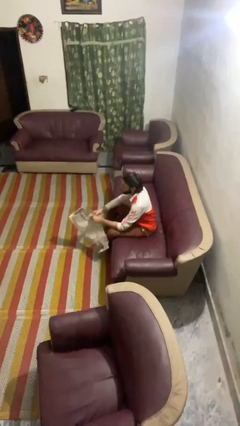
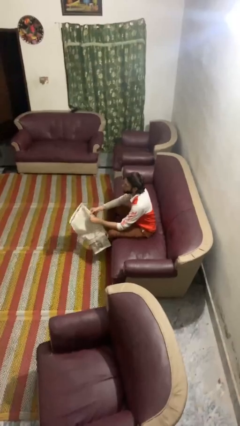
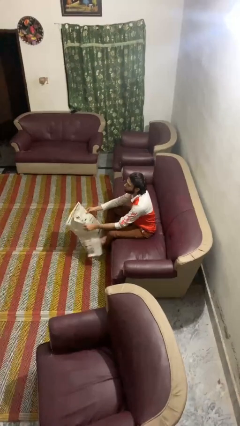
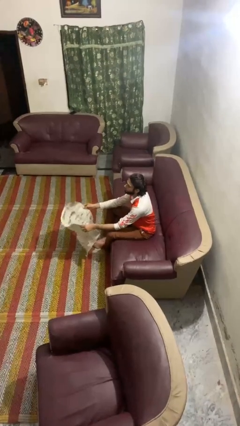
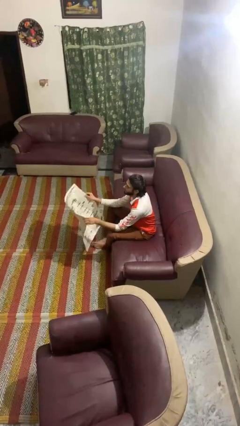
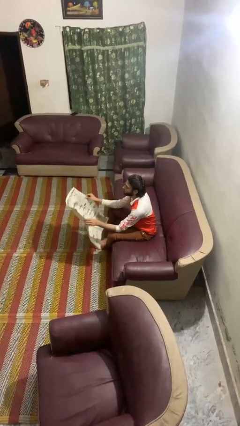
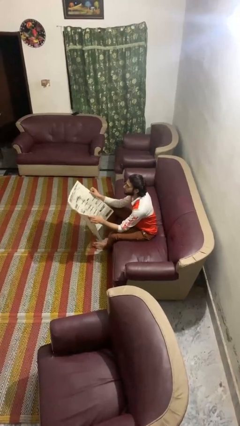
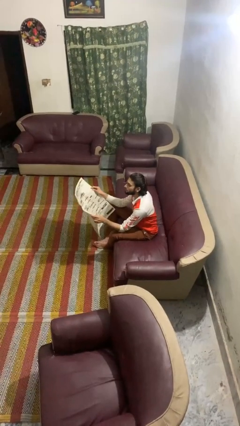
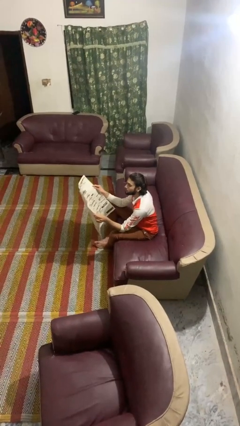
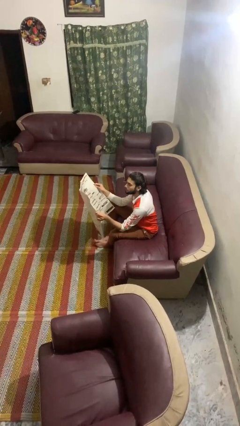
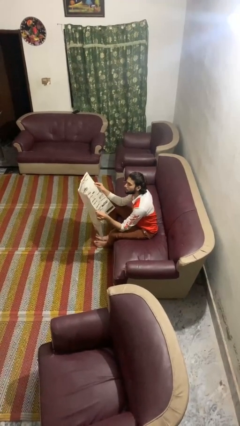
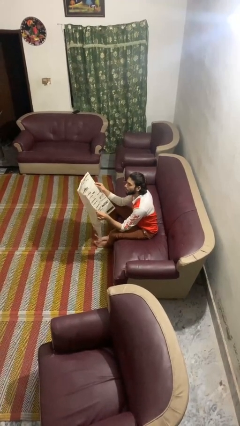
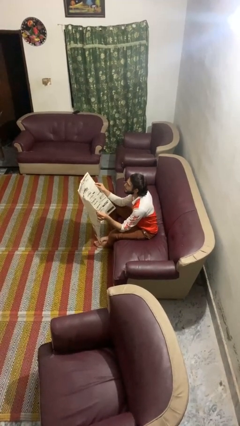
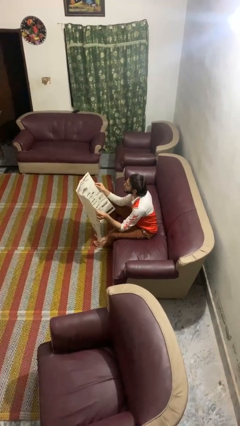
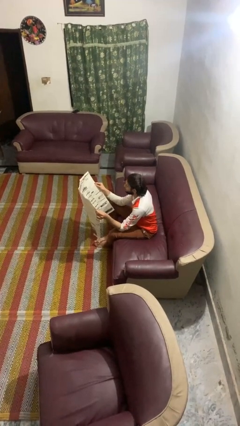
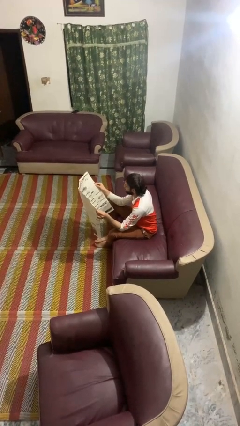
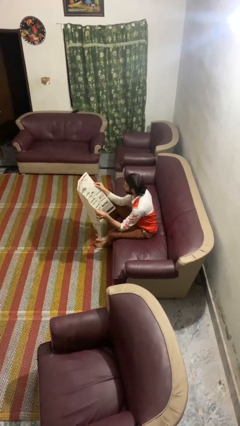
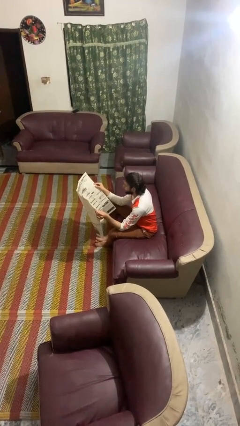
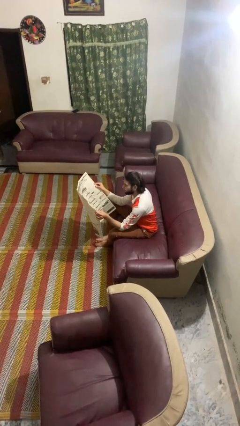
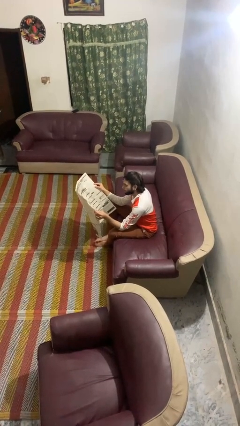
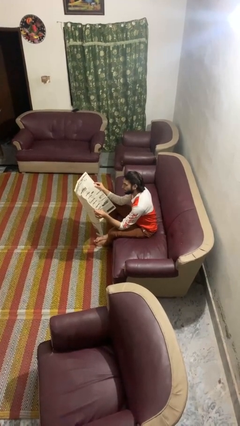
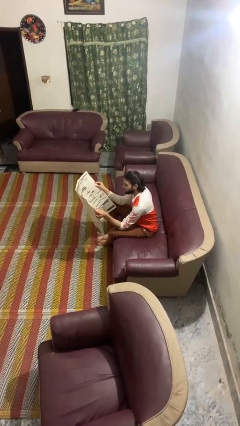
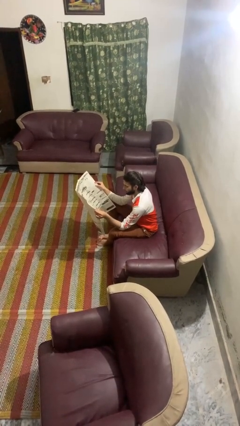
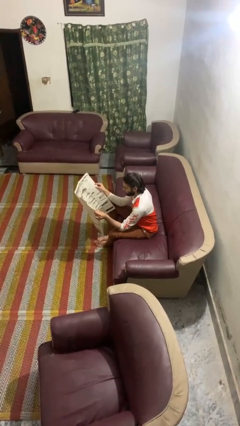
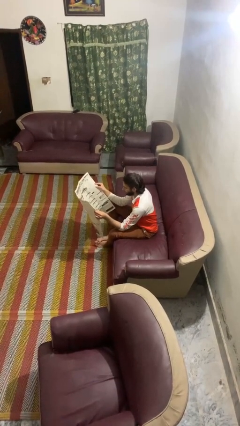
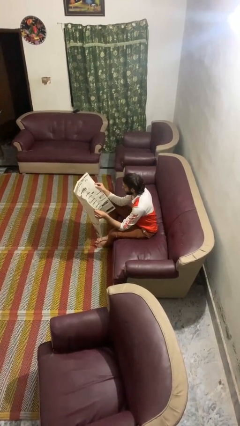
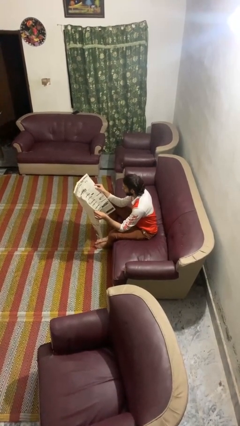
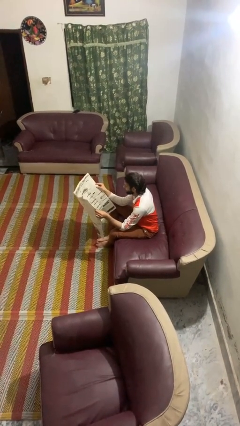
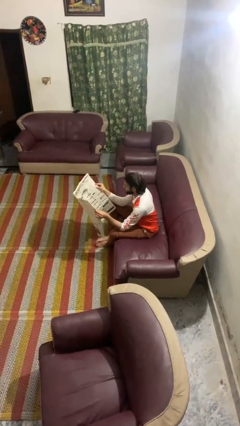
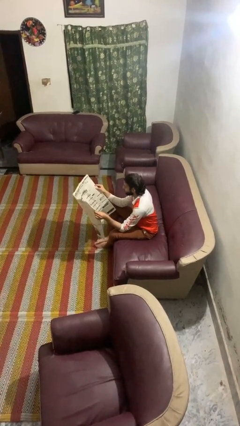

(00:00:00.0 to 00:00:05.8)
person reads newspaper

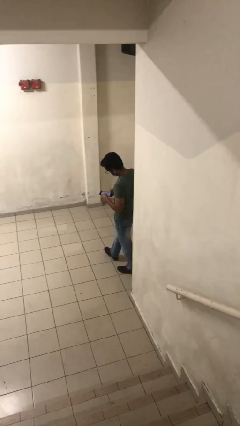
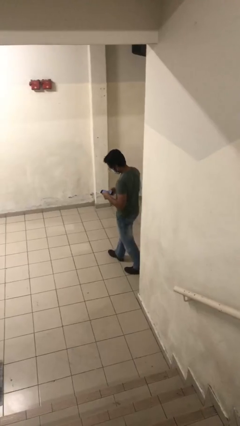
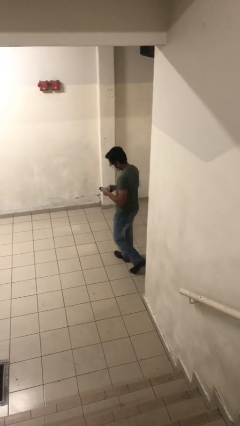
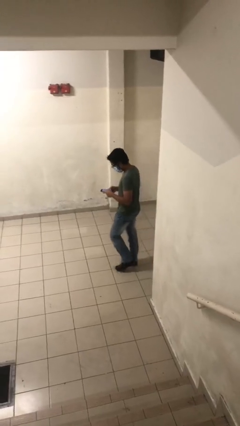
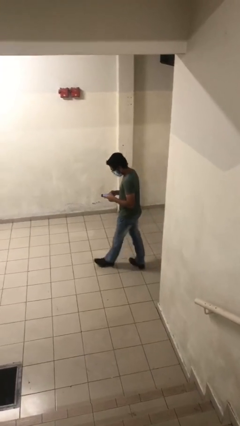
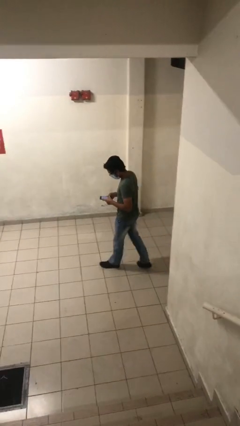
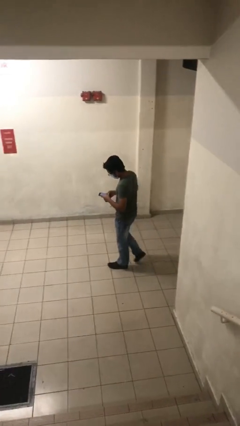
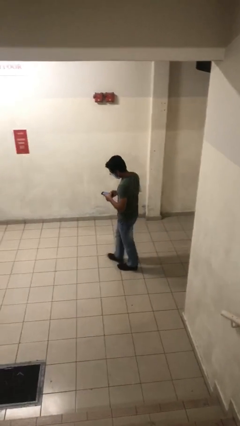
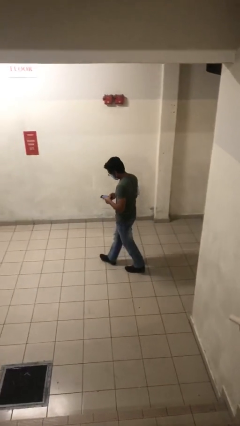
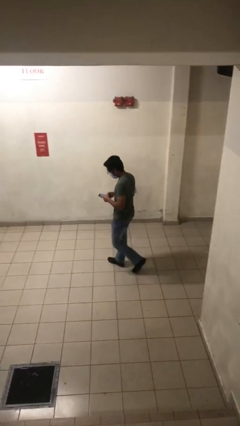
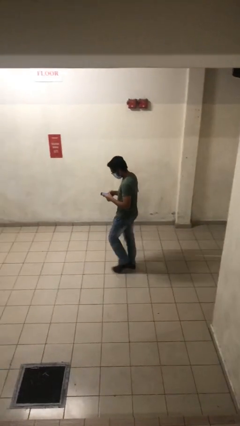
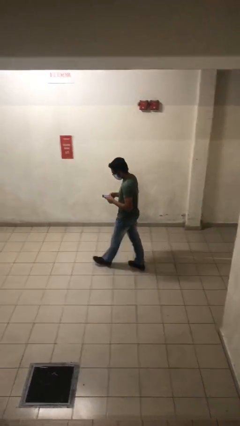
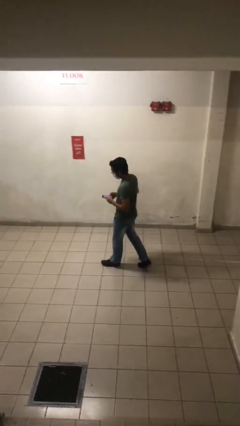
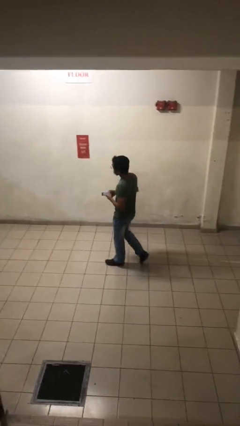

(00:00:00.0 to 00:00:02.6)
person texts on phone

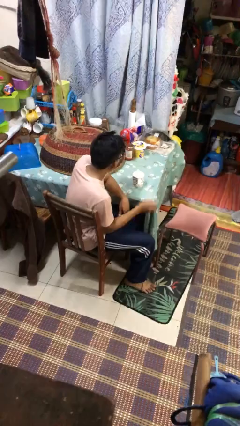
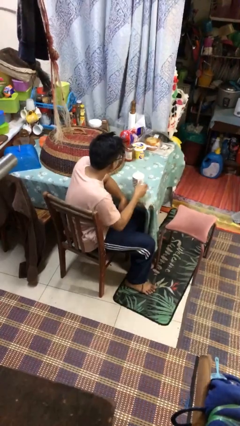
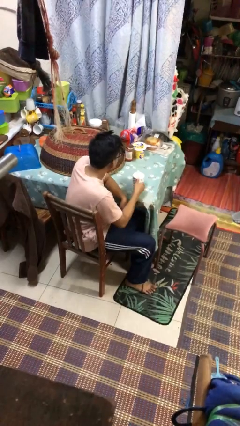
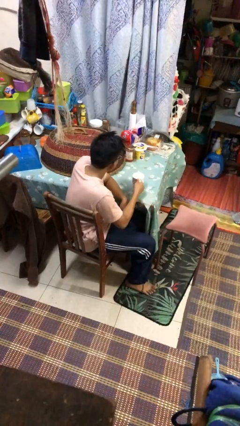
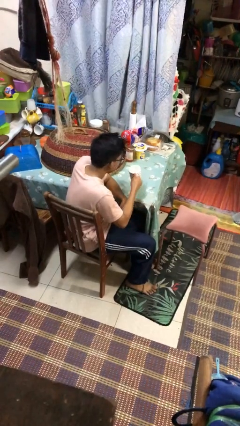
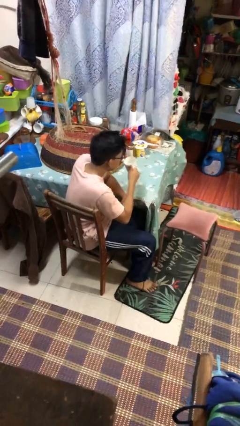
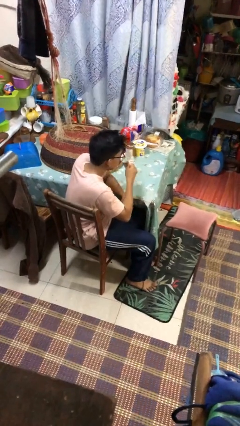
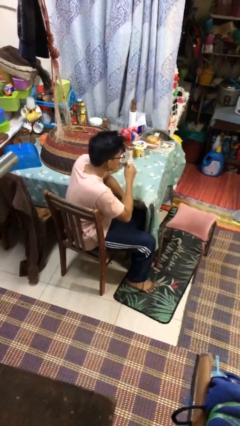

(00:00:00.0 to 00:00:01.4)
person picks up object from table

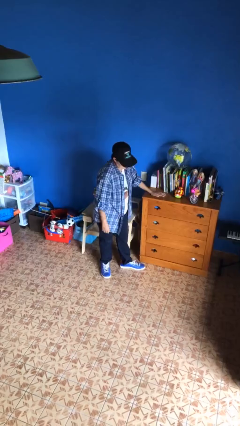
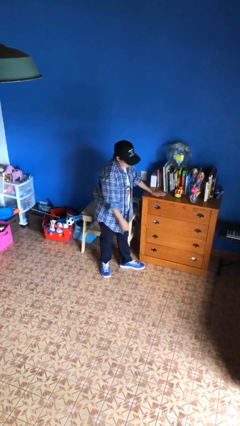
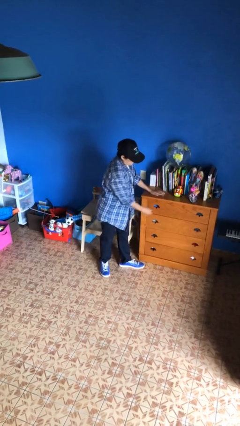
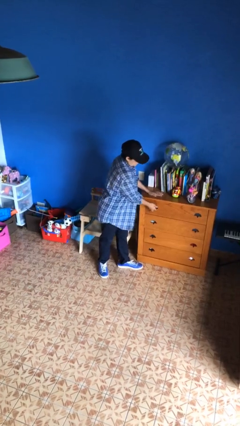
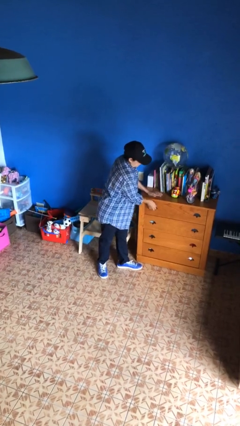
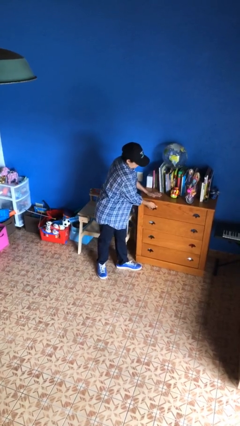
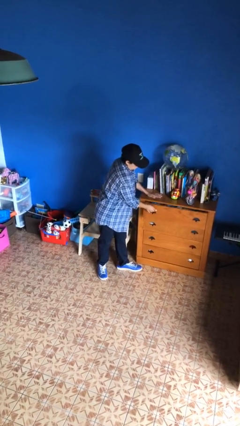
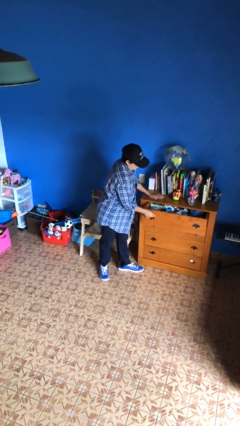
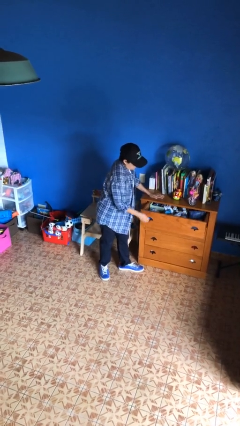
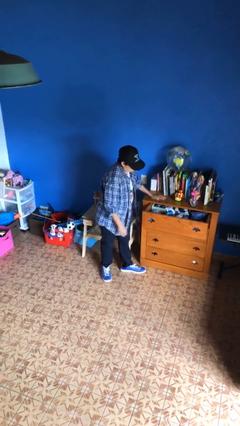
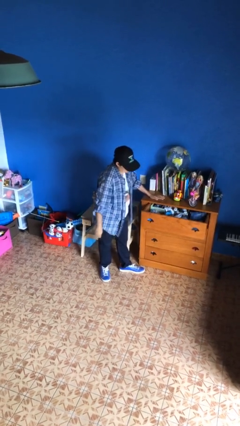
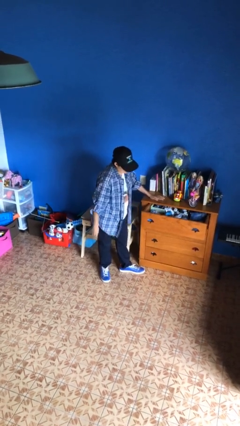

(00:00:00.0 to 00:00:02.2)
person opens dresser drawer

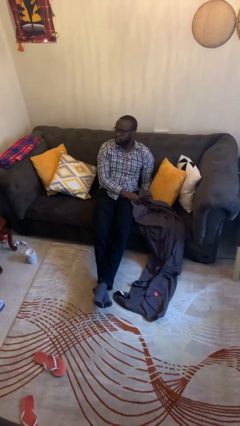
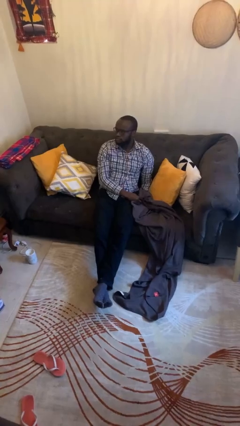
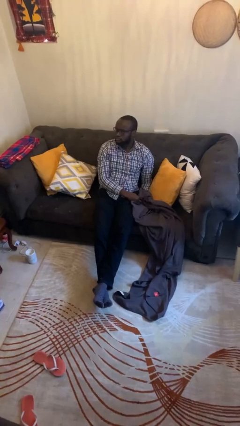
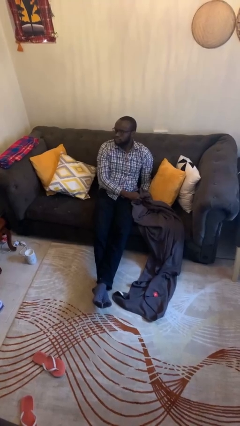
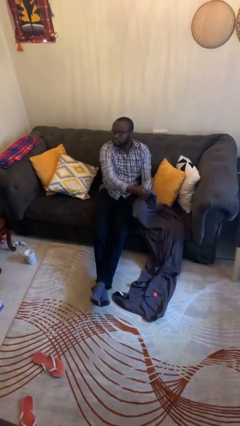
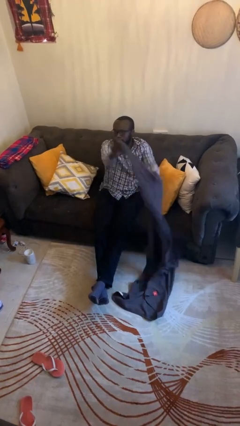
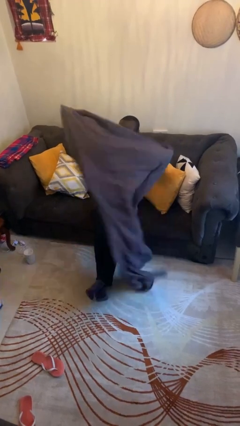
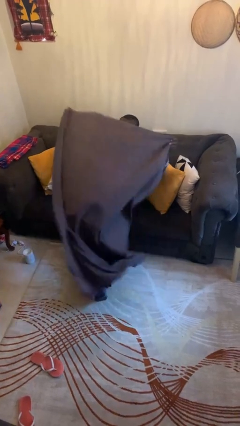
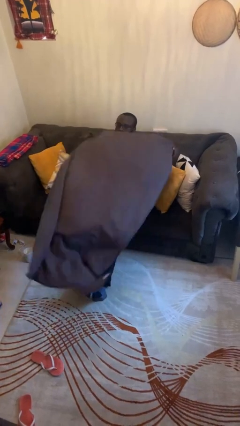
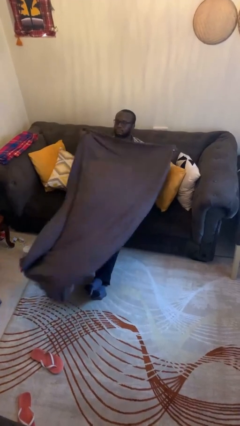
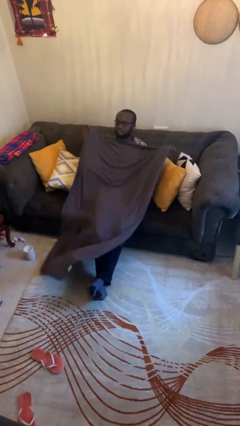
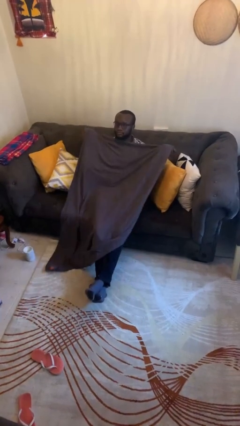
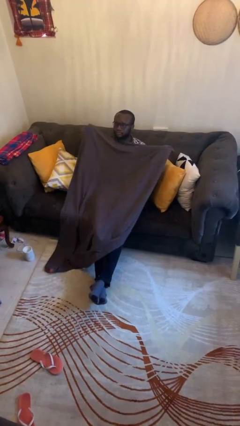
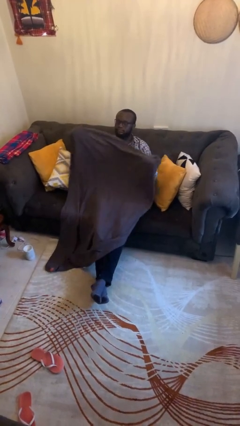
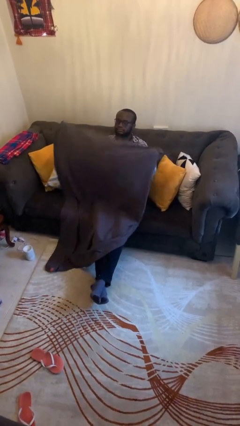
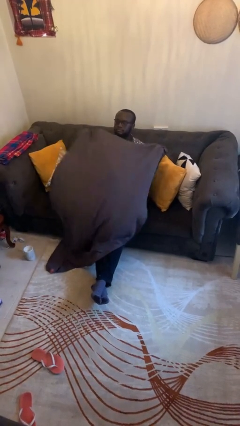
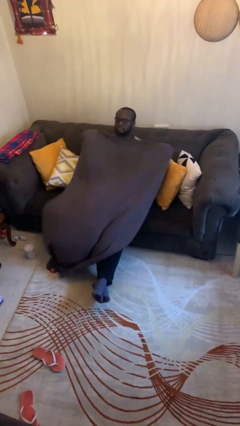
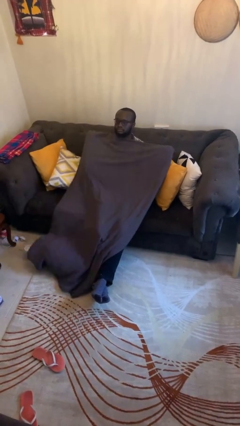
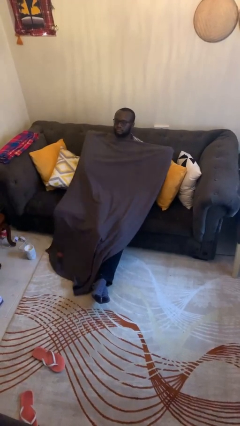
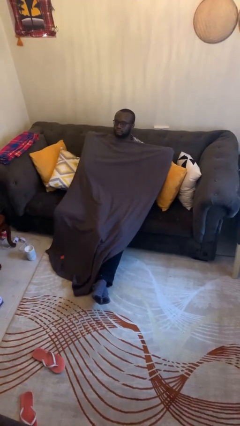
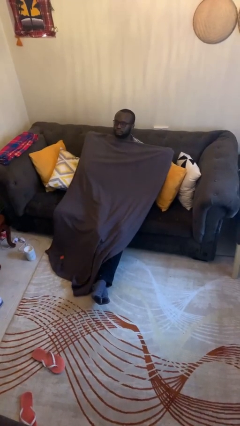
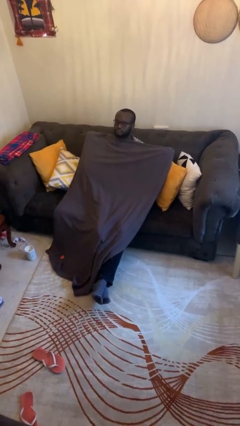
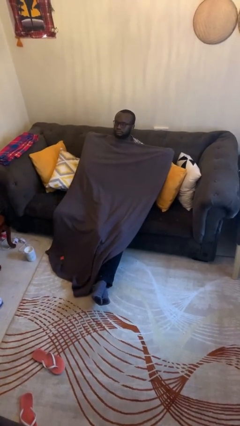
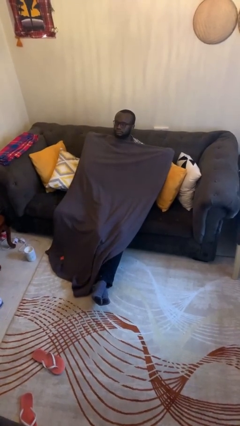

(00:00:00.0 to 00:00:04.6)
person covers with blanket

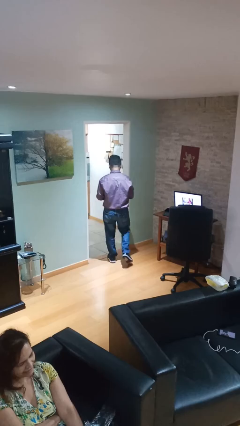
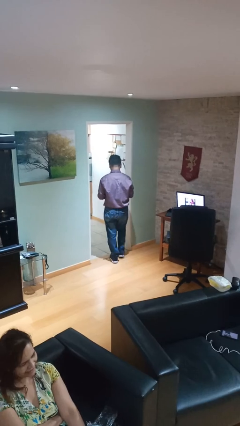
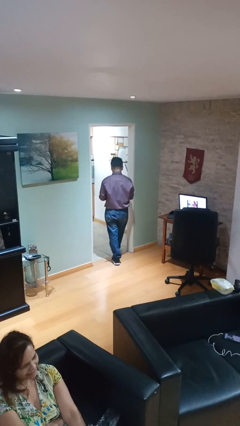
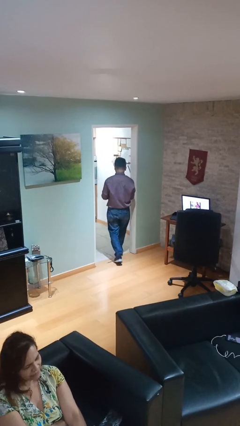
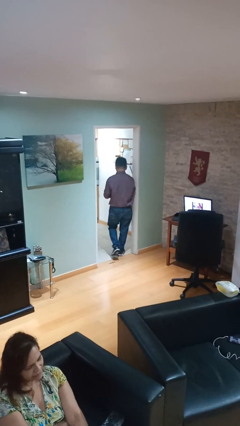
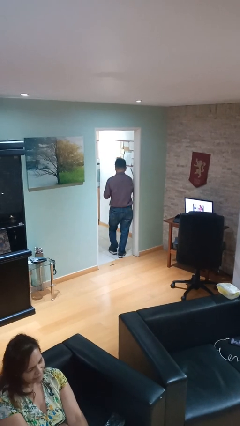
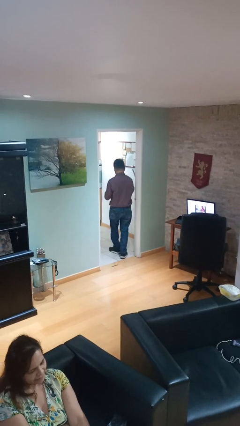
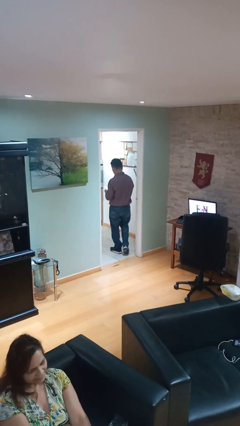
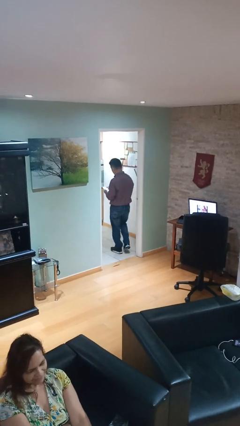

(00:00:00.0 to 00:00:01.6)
person exits scene through structure
